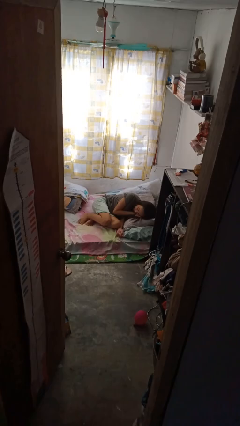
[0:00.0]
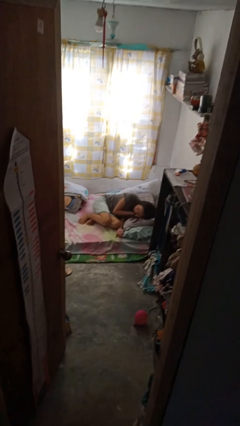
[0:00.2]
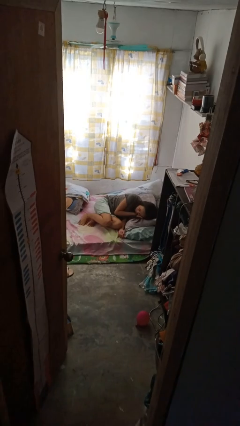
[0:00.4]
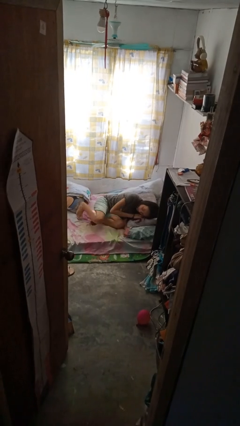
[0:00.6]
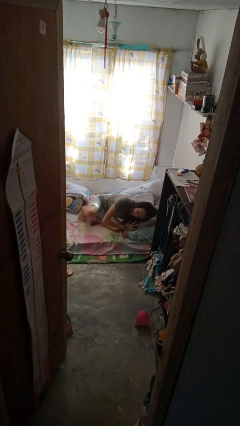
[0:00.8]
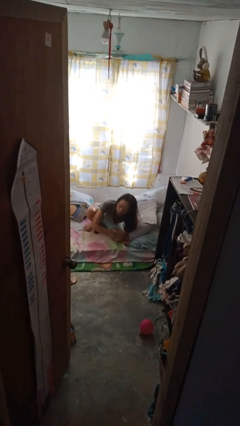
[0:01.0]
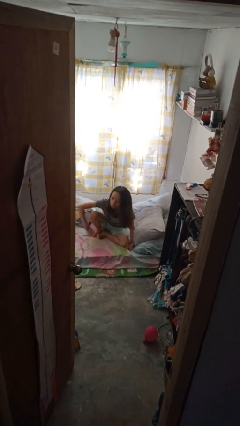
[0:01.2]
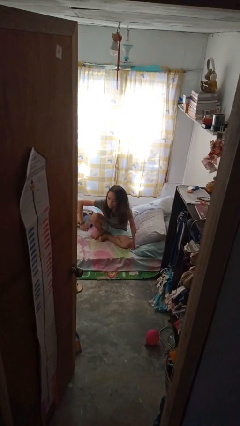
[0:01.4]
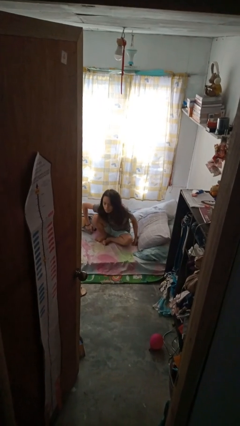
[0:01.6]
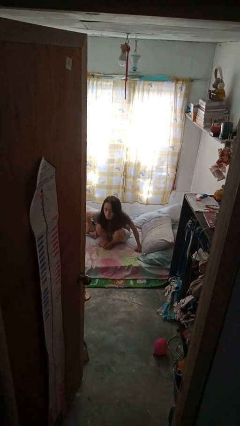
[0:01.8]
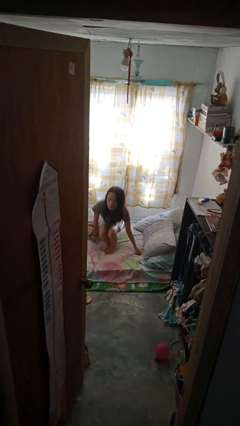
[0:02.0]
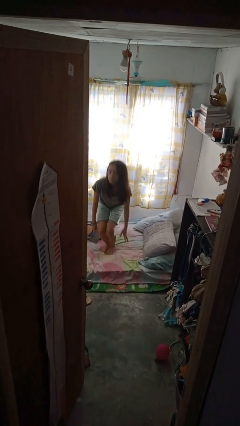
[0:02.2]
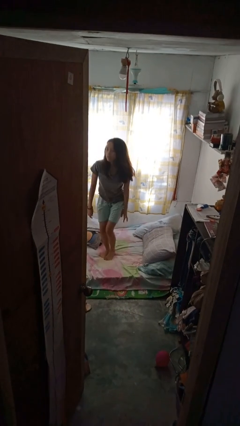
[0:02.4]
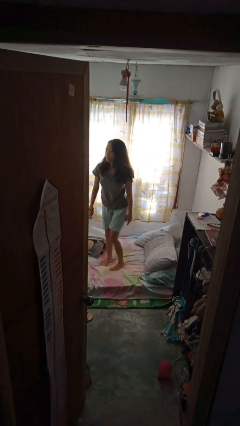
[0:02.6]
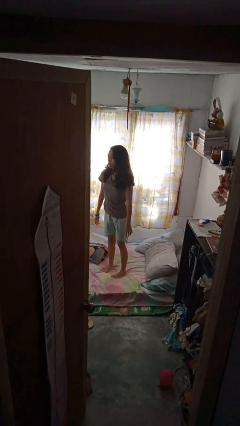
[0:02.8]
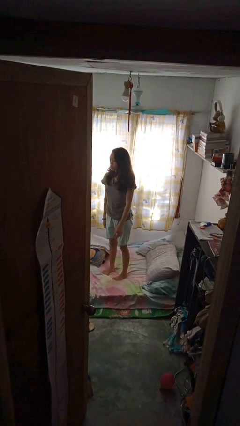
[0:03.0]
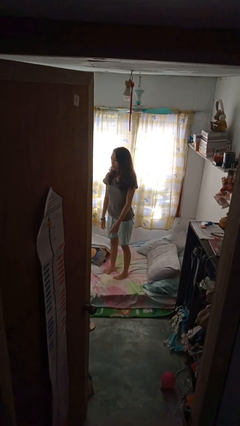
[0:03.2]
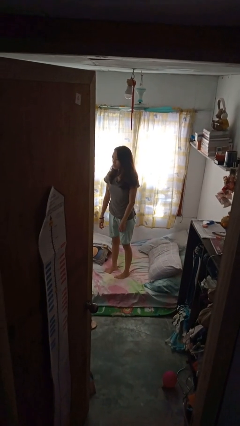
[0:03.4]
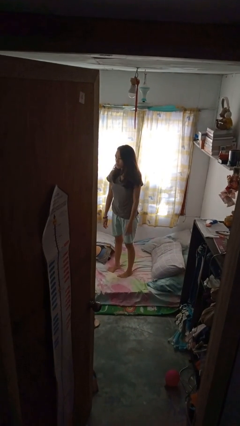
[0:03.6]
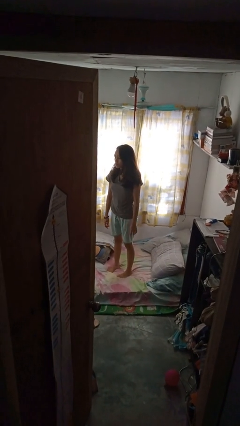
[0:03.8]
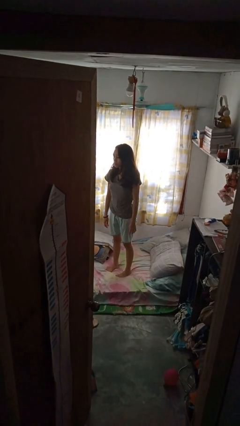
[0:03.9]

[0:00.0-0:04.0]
person stands up

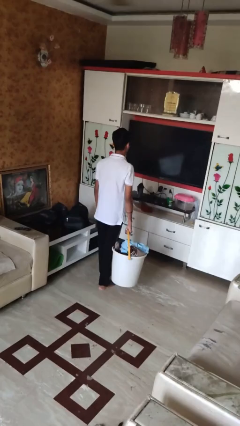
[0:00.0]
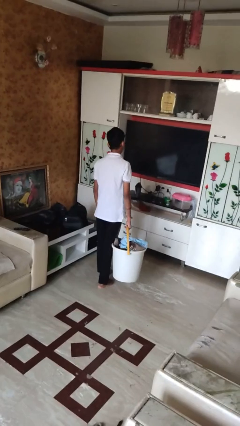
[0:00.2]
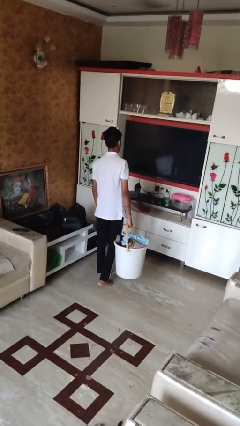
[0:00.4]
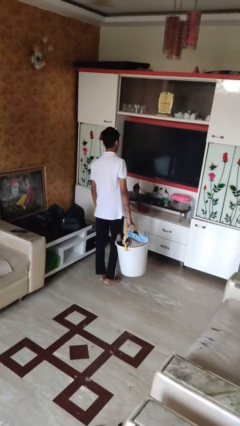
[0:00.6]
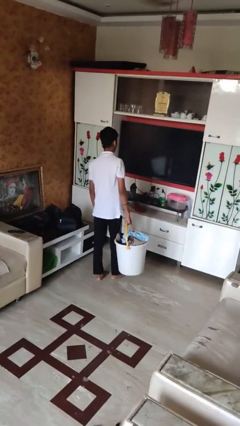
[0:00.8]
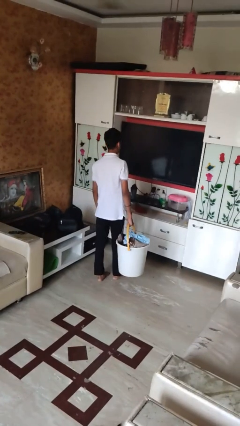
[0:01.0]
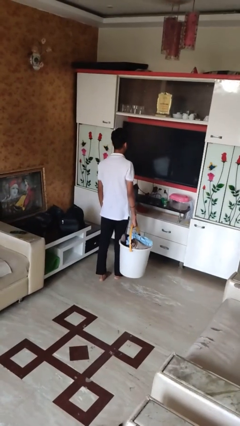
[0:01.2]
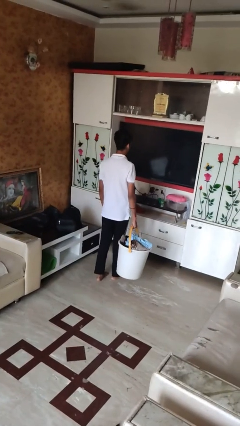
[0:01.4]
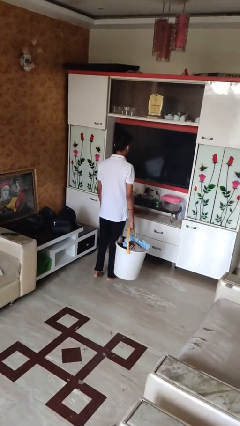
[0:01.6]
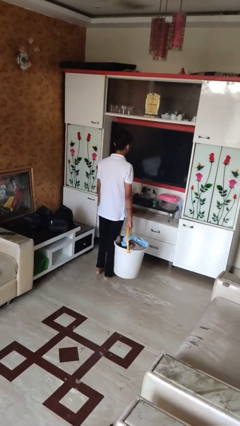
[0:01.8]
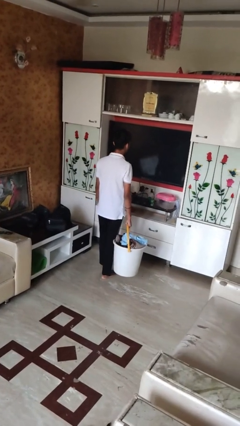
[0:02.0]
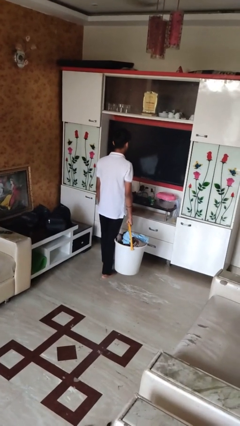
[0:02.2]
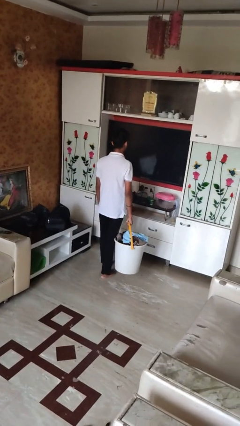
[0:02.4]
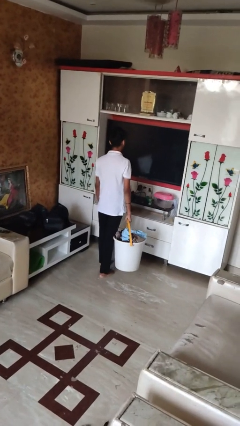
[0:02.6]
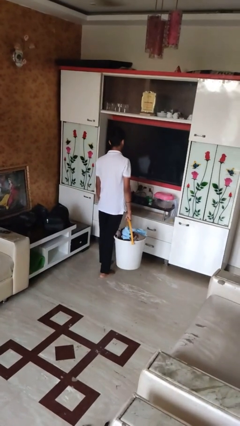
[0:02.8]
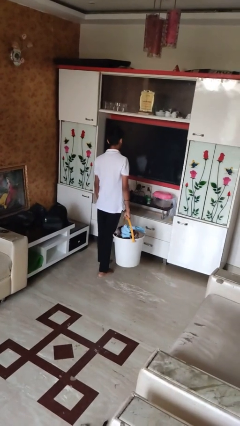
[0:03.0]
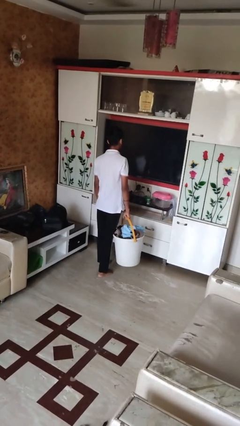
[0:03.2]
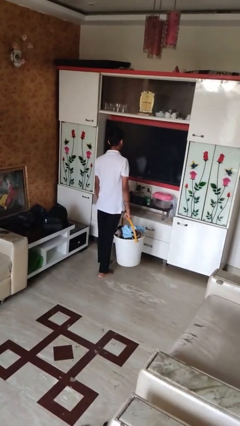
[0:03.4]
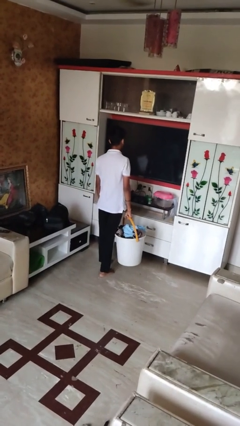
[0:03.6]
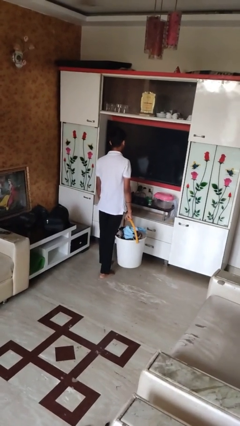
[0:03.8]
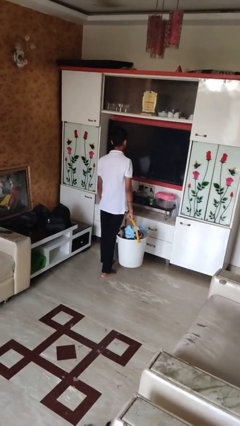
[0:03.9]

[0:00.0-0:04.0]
person carries laundry basket

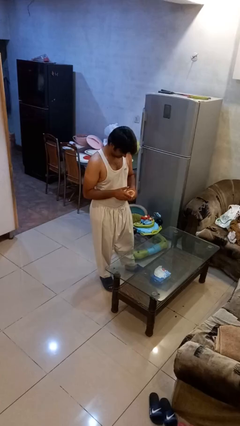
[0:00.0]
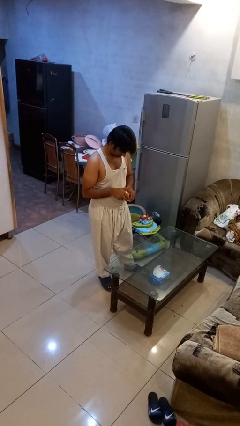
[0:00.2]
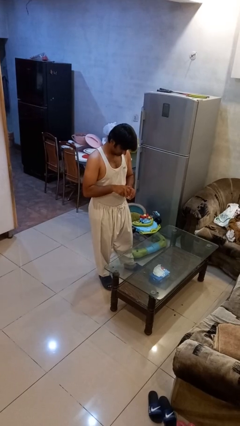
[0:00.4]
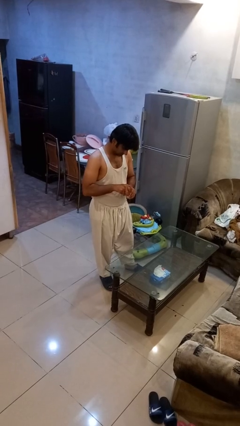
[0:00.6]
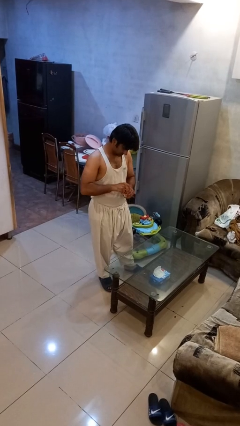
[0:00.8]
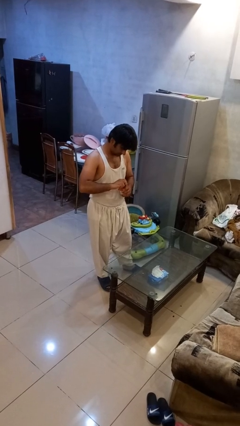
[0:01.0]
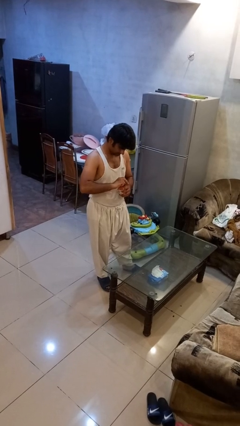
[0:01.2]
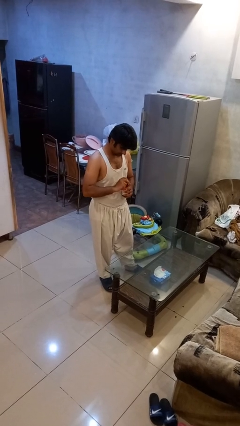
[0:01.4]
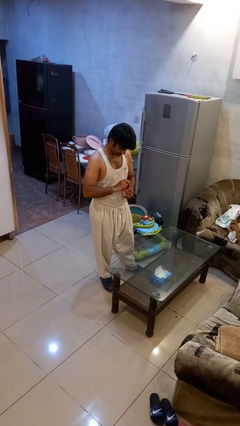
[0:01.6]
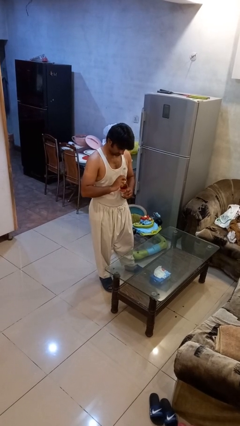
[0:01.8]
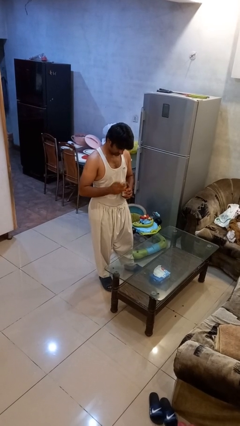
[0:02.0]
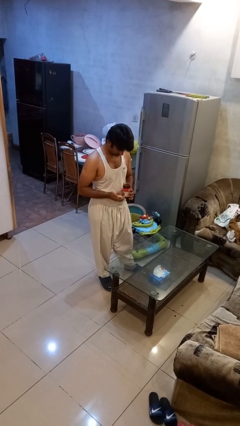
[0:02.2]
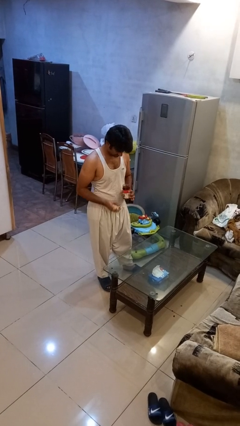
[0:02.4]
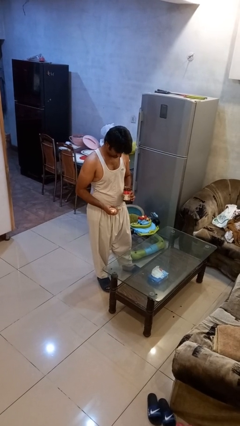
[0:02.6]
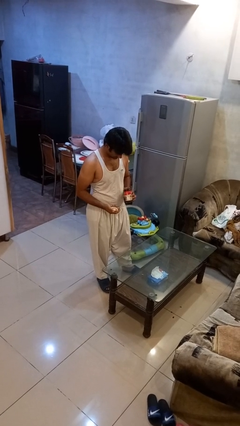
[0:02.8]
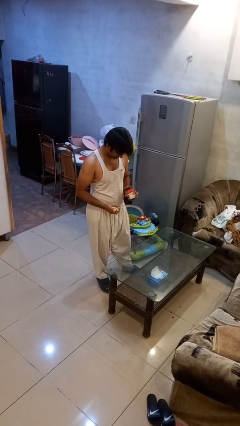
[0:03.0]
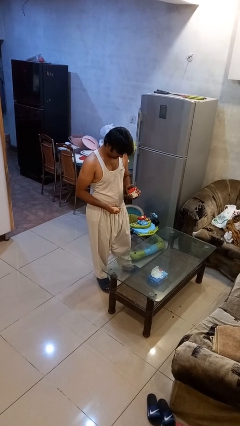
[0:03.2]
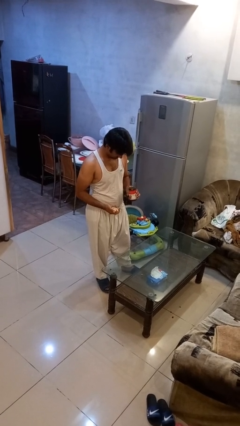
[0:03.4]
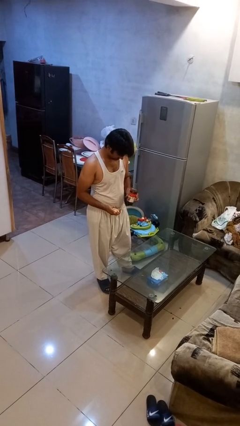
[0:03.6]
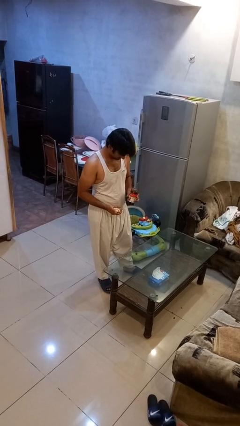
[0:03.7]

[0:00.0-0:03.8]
person opens jar

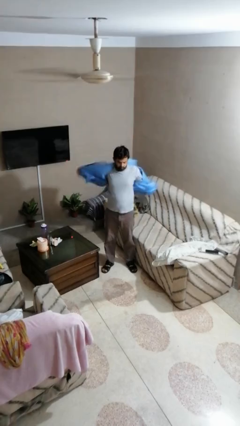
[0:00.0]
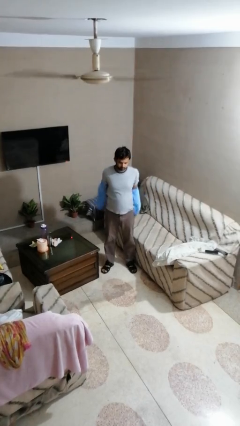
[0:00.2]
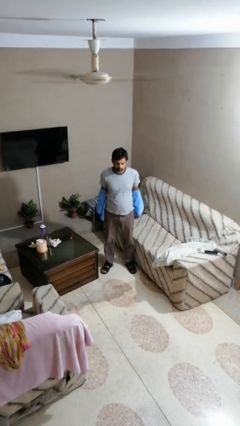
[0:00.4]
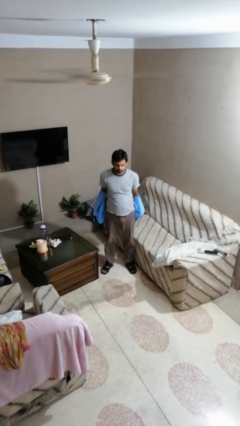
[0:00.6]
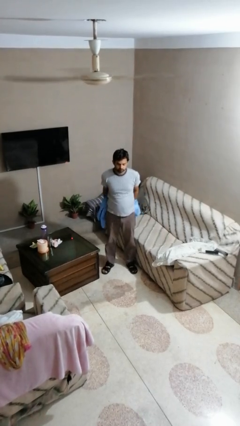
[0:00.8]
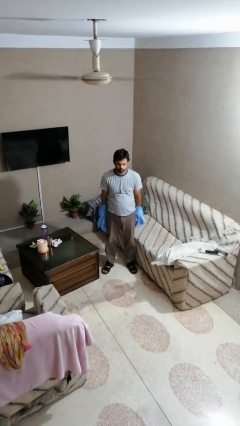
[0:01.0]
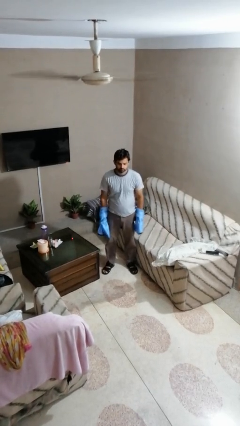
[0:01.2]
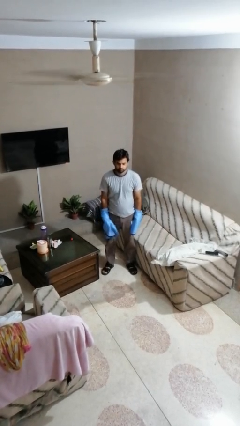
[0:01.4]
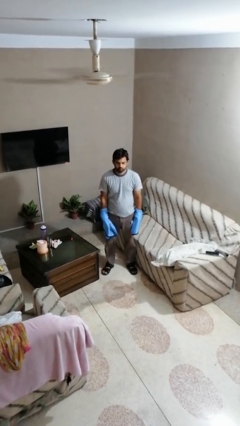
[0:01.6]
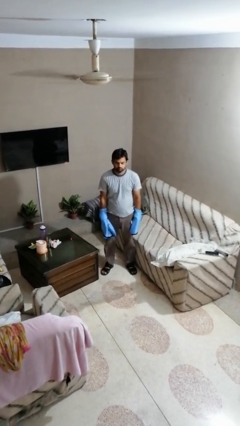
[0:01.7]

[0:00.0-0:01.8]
person takes off jacket

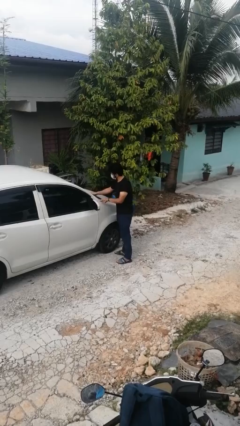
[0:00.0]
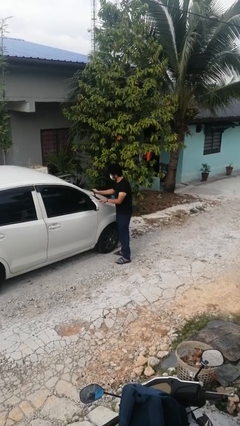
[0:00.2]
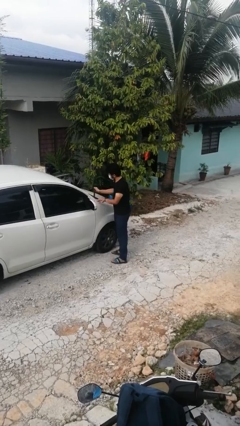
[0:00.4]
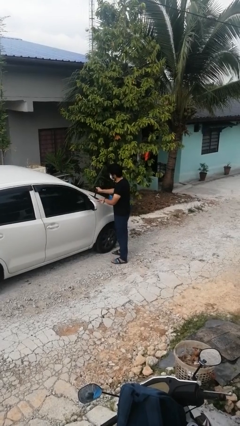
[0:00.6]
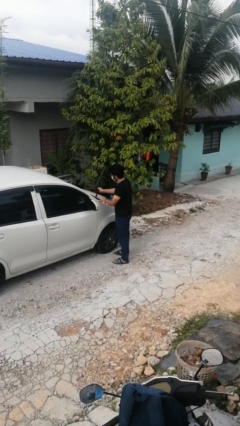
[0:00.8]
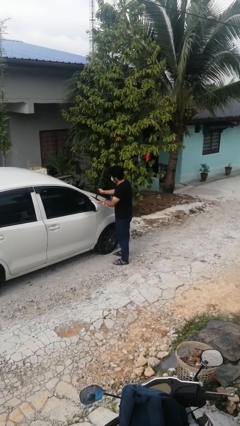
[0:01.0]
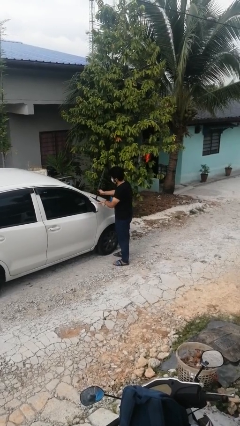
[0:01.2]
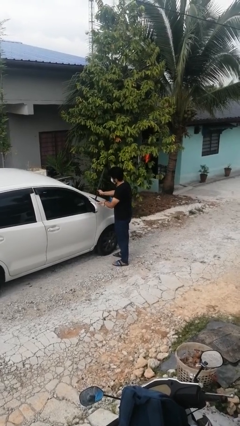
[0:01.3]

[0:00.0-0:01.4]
person flips up car wipers

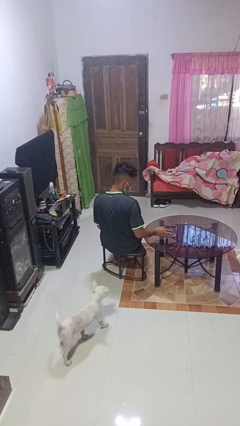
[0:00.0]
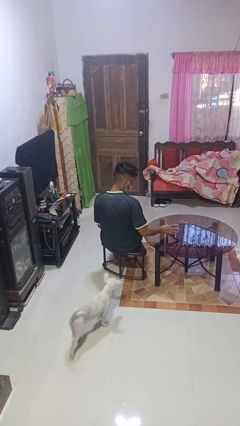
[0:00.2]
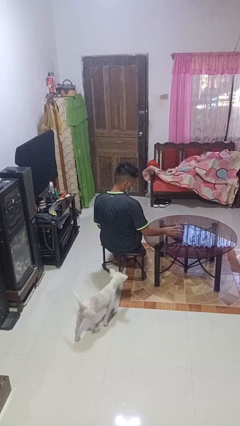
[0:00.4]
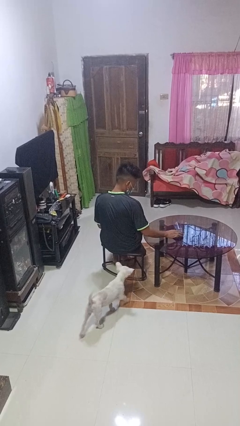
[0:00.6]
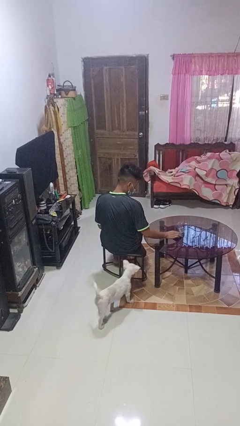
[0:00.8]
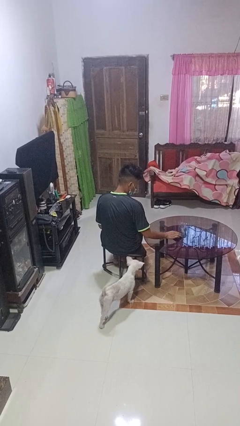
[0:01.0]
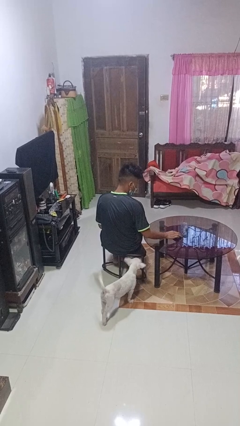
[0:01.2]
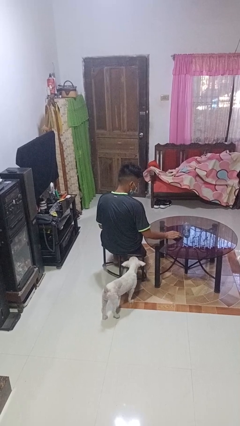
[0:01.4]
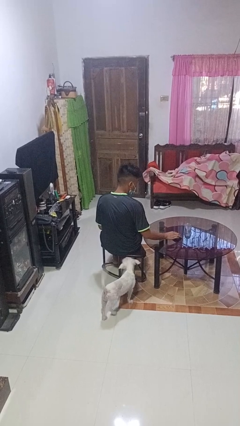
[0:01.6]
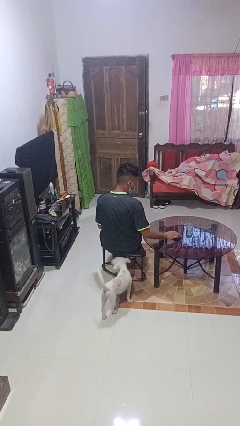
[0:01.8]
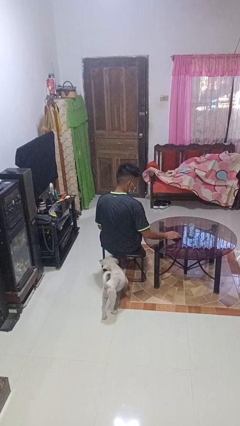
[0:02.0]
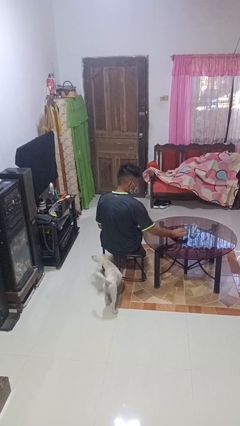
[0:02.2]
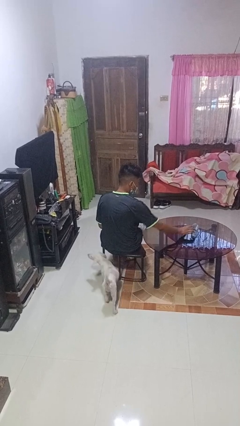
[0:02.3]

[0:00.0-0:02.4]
person knocks over glass

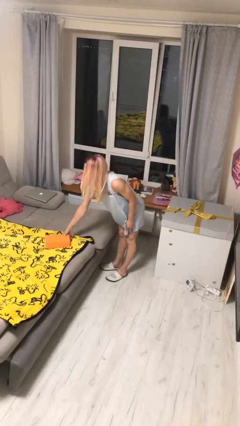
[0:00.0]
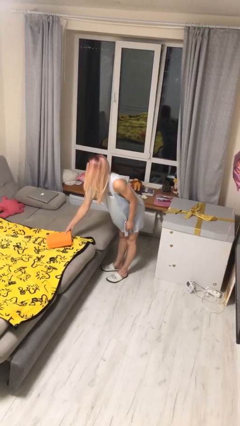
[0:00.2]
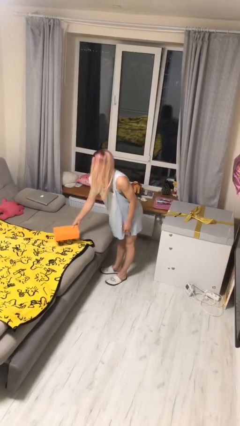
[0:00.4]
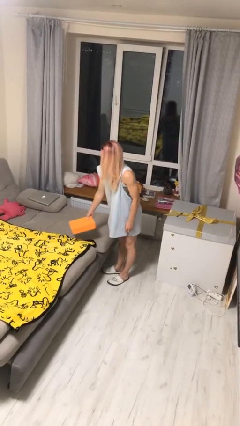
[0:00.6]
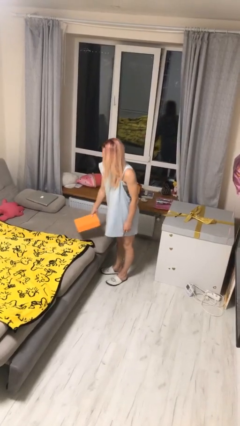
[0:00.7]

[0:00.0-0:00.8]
person picks up object from bed
